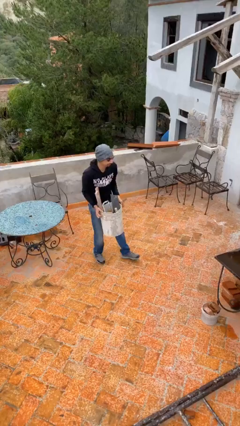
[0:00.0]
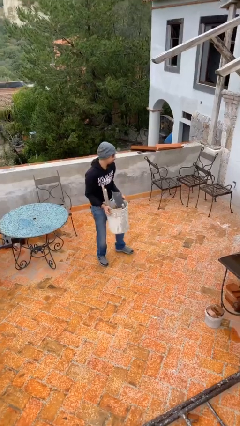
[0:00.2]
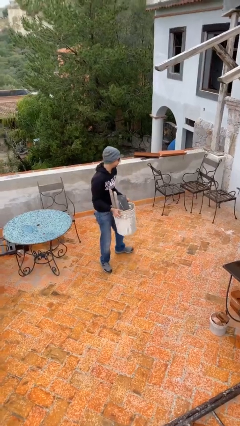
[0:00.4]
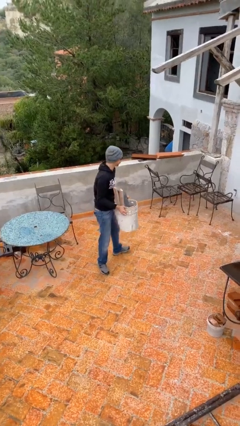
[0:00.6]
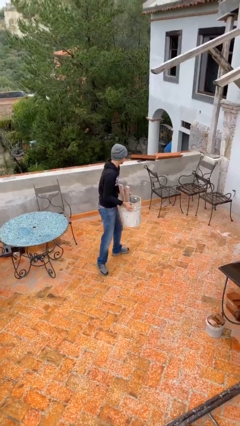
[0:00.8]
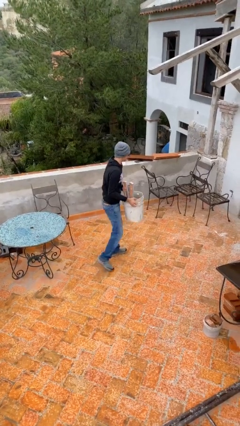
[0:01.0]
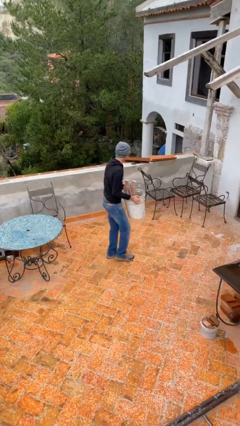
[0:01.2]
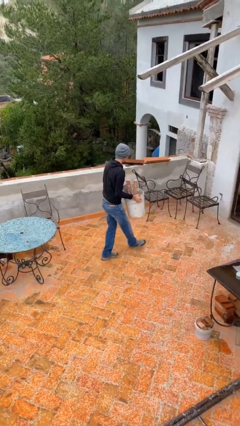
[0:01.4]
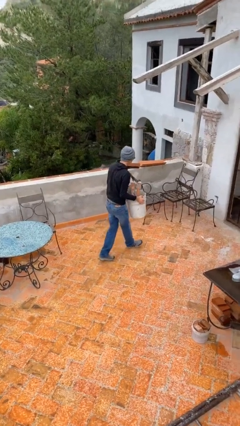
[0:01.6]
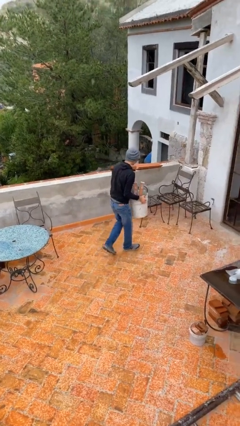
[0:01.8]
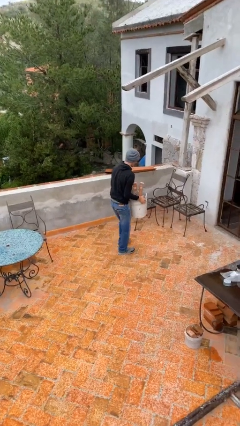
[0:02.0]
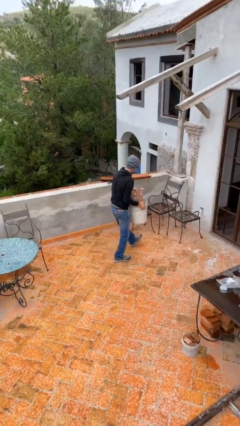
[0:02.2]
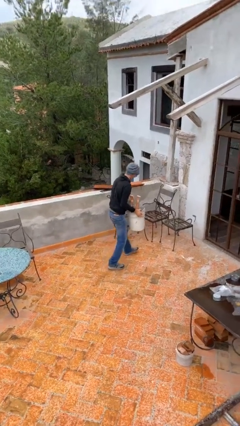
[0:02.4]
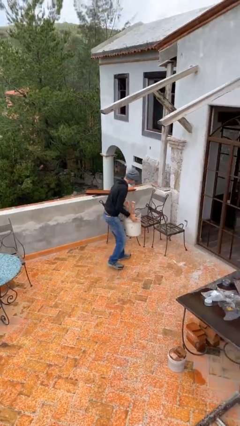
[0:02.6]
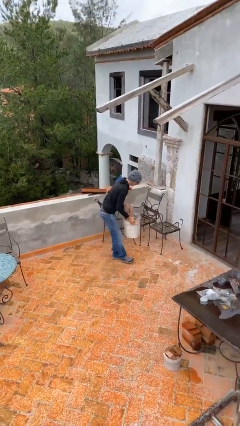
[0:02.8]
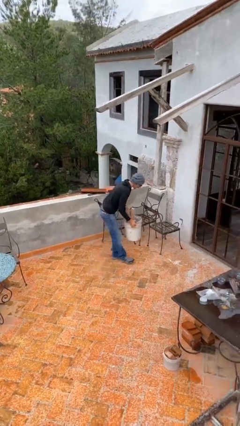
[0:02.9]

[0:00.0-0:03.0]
person carries heavy object

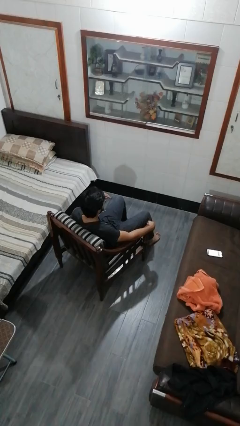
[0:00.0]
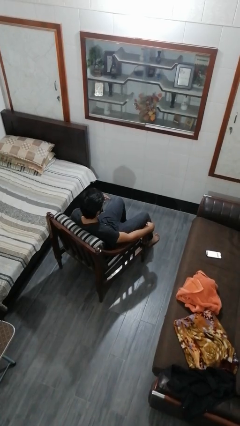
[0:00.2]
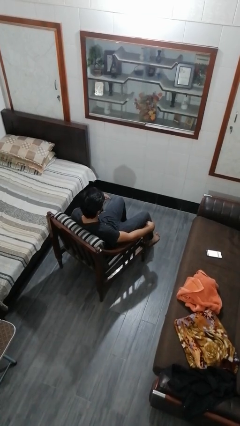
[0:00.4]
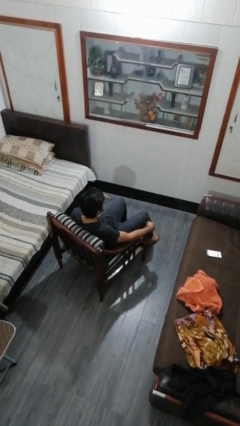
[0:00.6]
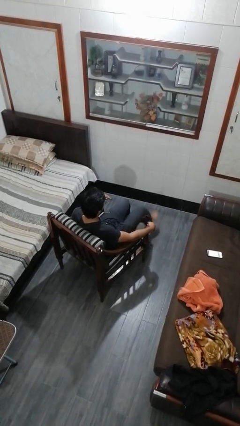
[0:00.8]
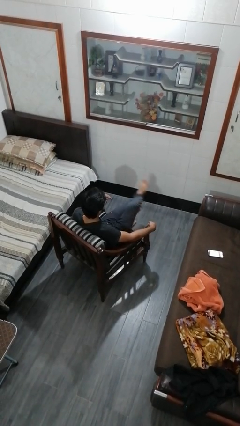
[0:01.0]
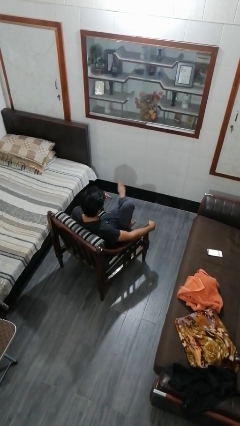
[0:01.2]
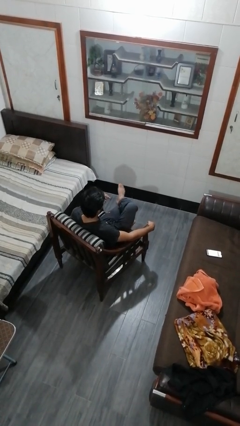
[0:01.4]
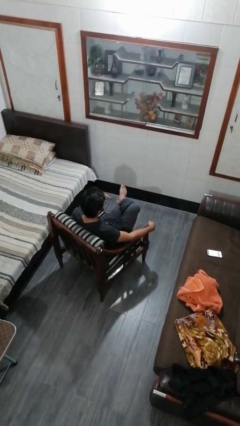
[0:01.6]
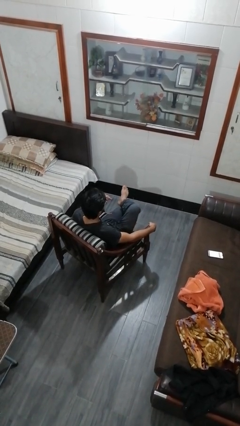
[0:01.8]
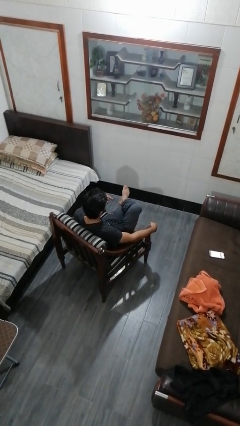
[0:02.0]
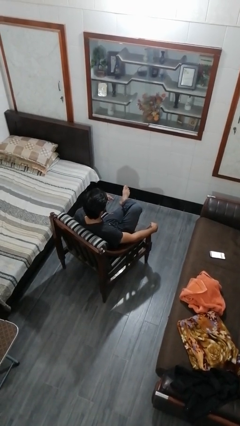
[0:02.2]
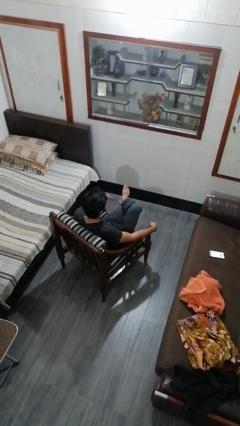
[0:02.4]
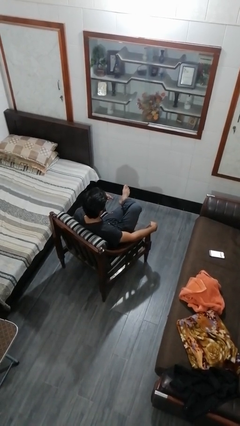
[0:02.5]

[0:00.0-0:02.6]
person crosses legs

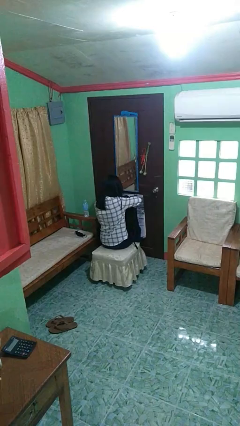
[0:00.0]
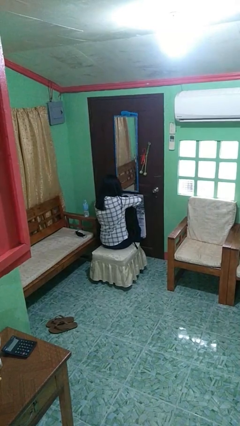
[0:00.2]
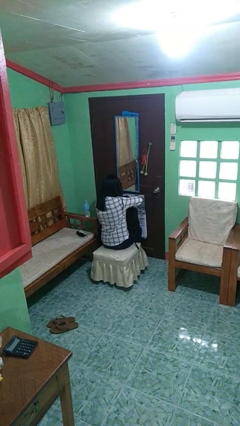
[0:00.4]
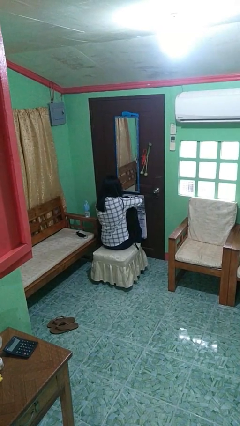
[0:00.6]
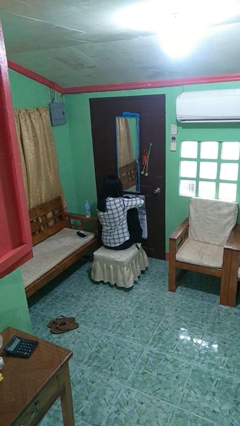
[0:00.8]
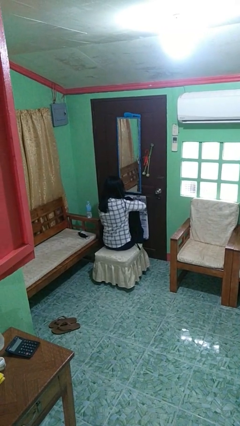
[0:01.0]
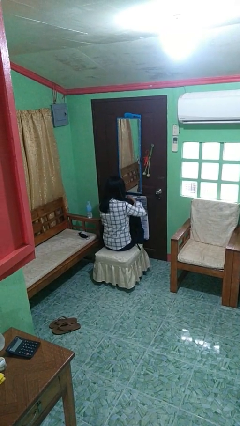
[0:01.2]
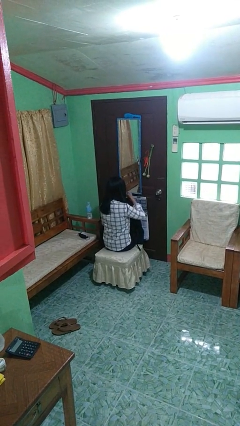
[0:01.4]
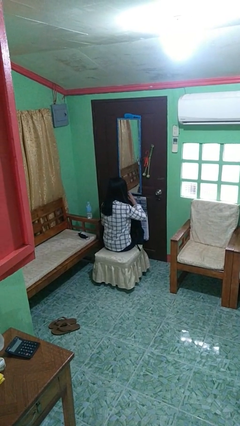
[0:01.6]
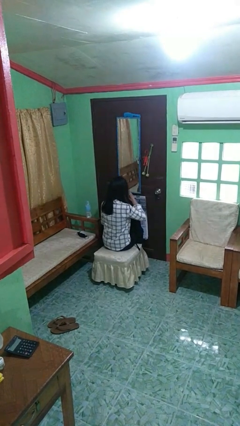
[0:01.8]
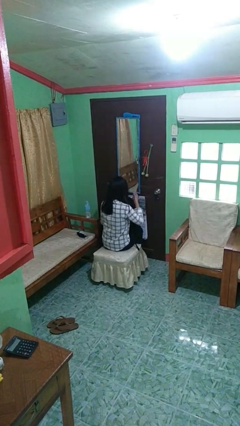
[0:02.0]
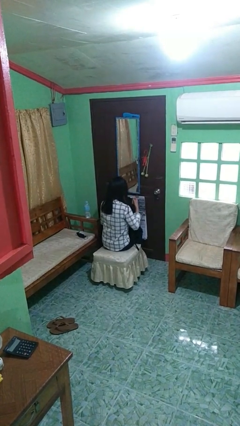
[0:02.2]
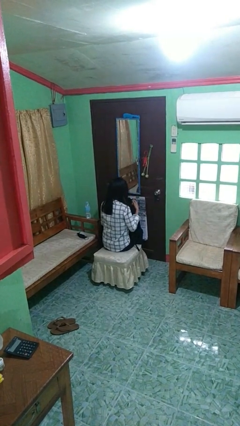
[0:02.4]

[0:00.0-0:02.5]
person eats snack from bag

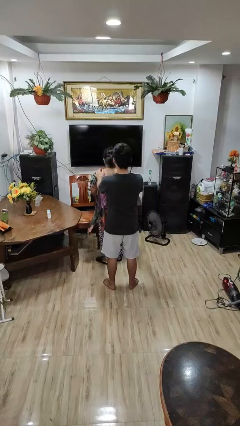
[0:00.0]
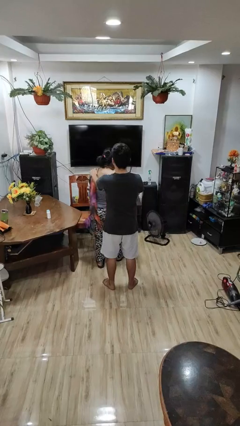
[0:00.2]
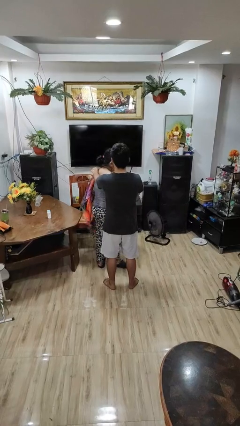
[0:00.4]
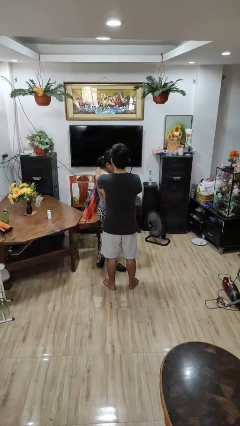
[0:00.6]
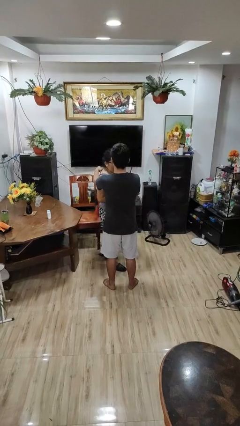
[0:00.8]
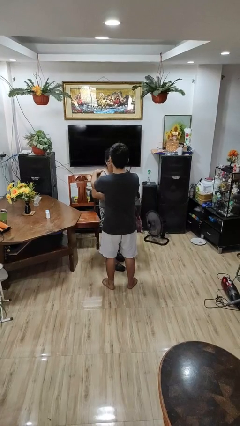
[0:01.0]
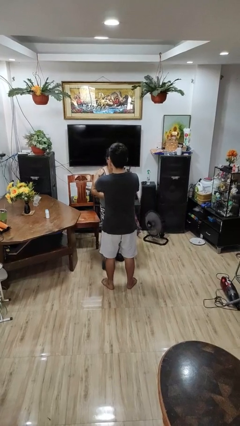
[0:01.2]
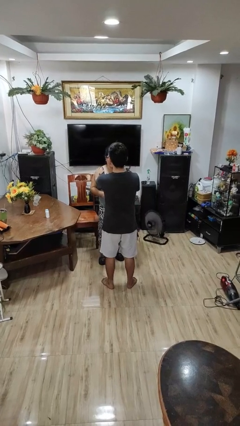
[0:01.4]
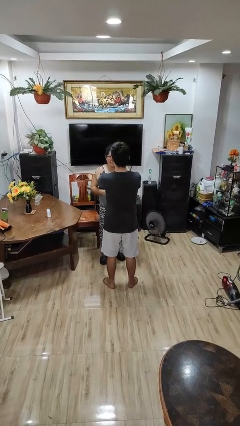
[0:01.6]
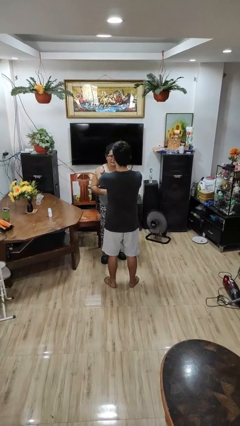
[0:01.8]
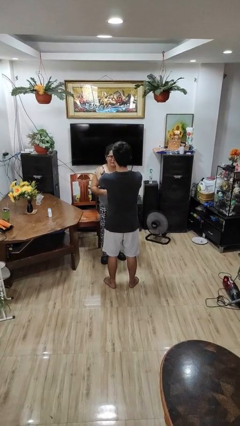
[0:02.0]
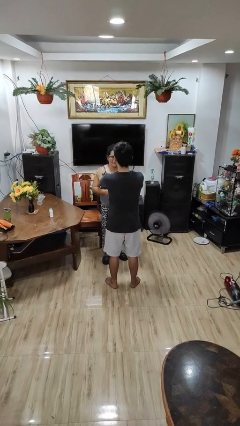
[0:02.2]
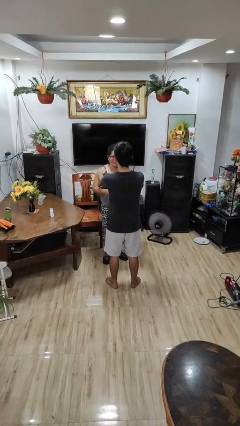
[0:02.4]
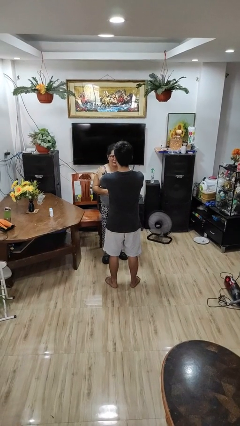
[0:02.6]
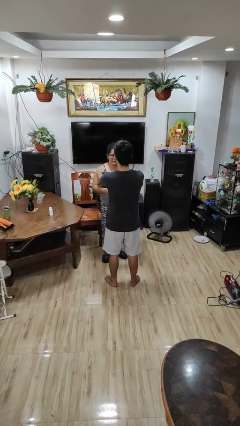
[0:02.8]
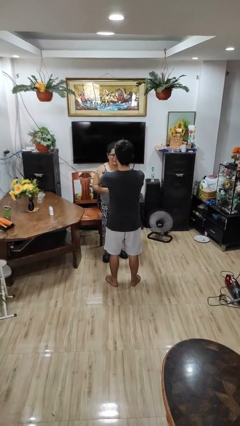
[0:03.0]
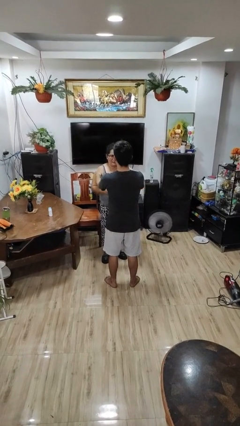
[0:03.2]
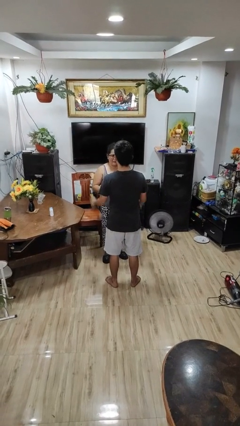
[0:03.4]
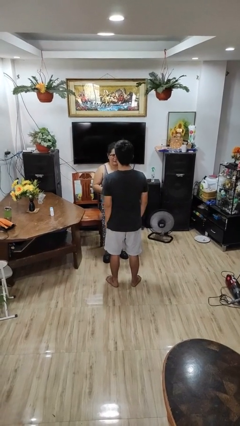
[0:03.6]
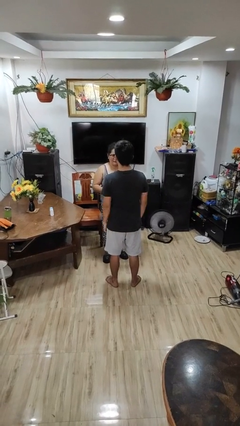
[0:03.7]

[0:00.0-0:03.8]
person spins person around

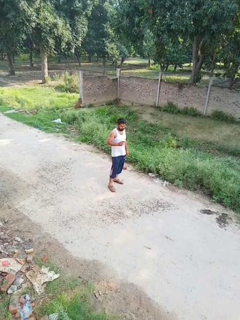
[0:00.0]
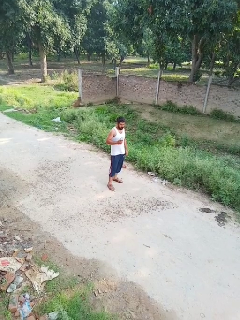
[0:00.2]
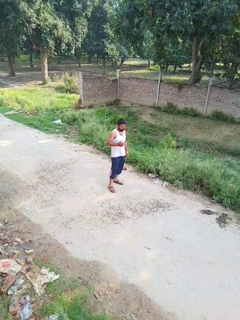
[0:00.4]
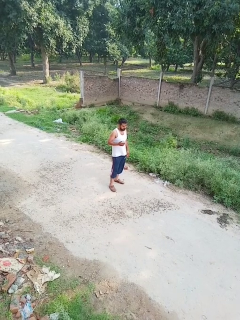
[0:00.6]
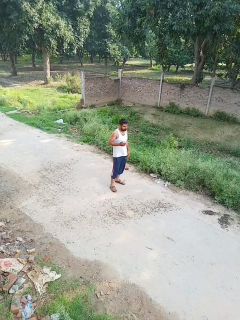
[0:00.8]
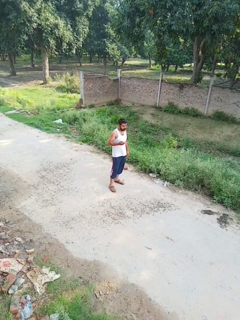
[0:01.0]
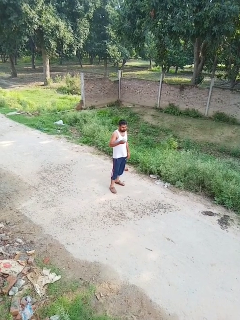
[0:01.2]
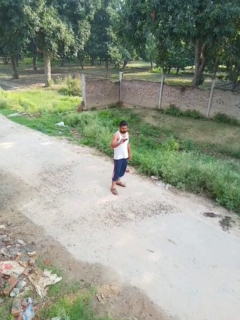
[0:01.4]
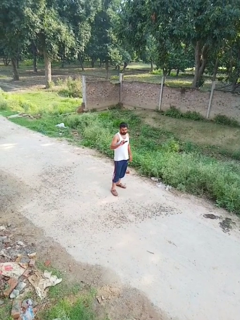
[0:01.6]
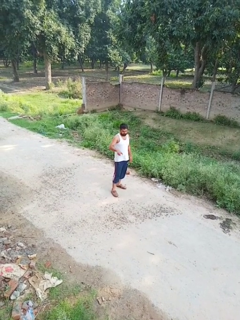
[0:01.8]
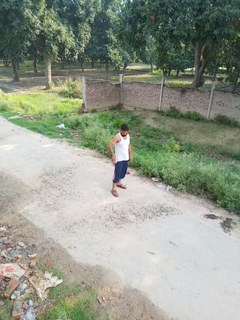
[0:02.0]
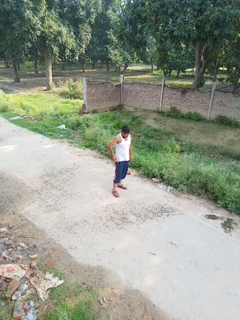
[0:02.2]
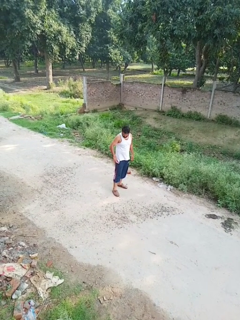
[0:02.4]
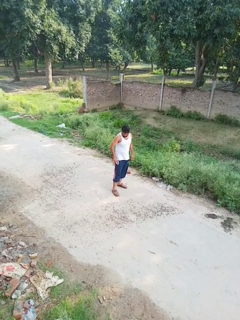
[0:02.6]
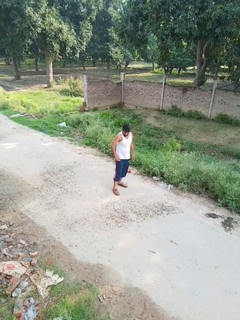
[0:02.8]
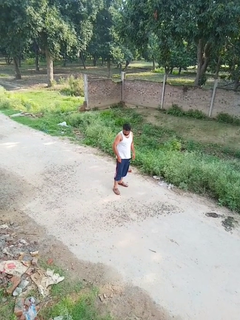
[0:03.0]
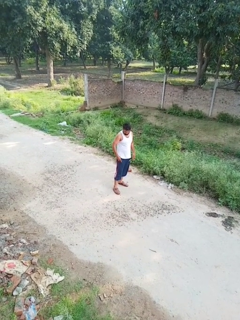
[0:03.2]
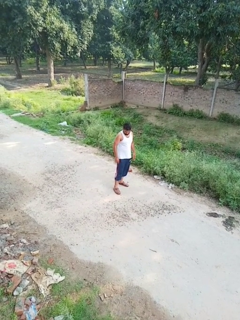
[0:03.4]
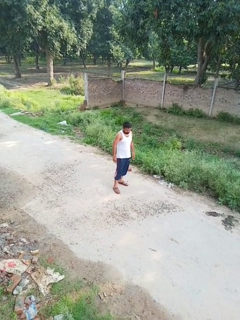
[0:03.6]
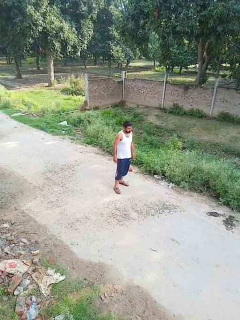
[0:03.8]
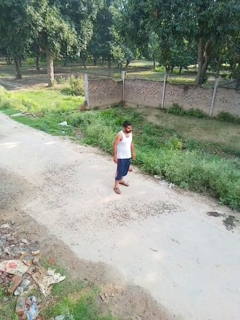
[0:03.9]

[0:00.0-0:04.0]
person puts phone into pocket

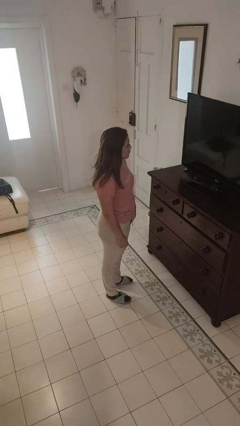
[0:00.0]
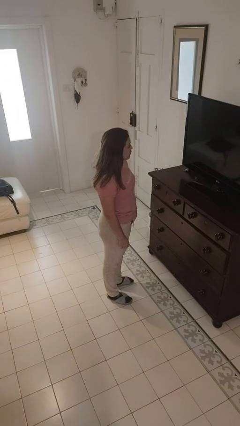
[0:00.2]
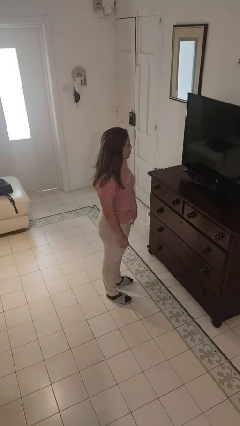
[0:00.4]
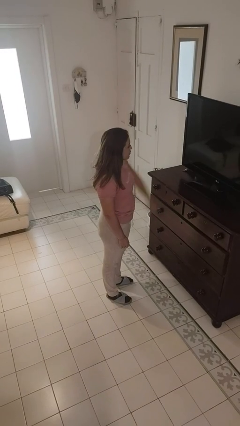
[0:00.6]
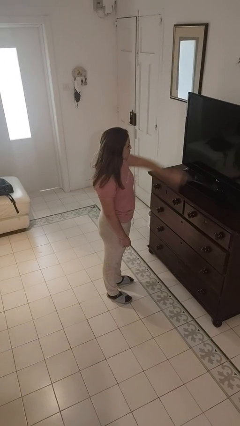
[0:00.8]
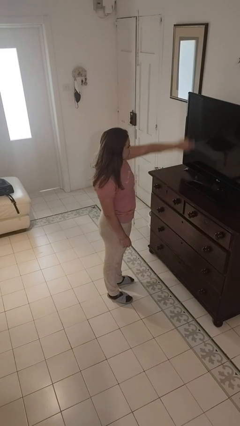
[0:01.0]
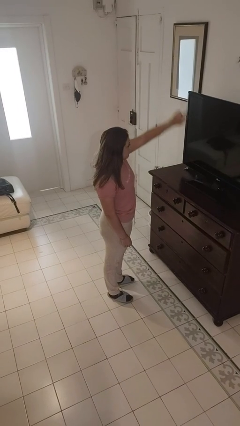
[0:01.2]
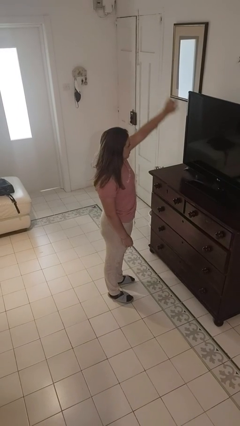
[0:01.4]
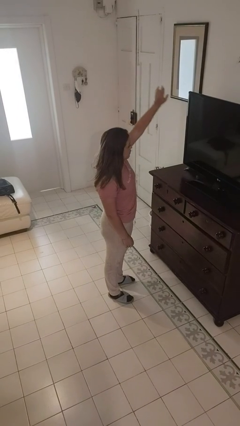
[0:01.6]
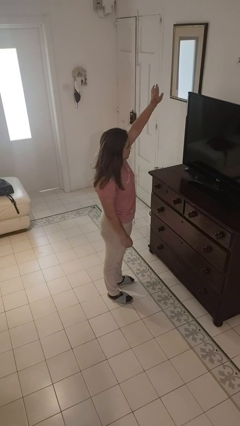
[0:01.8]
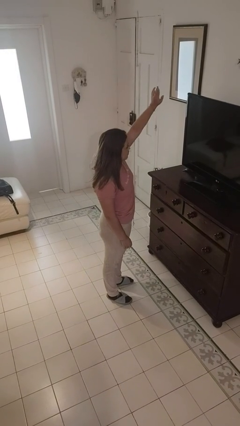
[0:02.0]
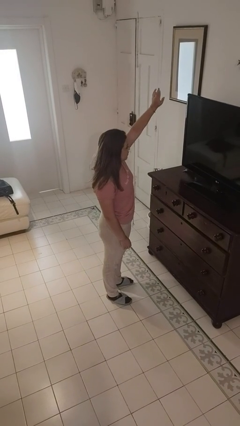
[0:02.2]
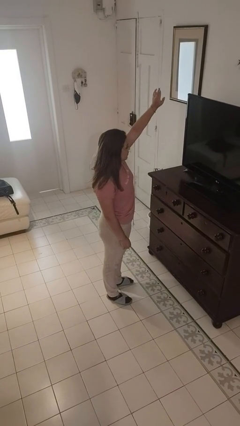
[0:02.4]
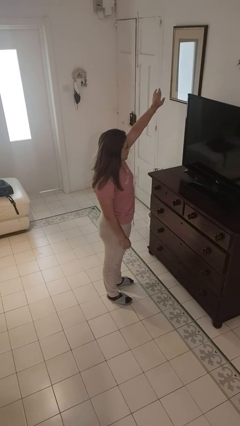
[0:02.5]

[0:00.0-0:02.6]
person gestures swipe up
